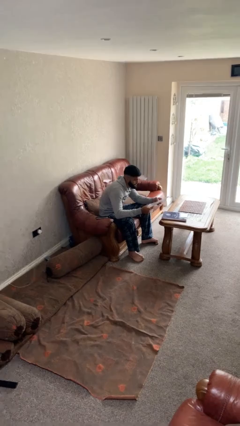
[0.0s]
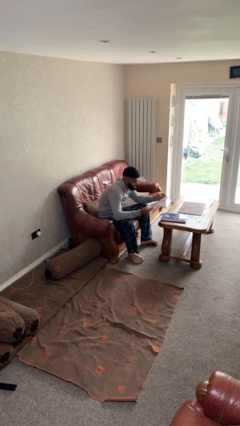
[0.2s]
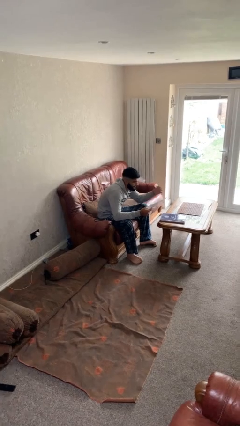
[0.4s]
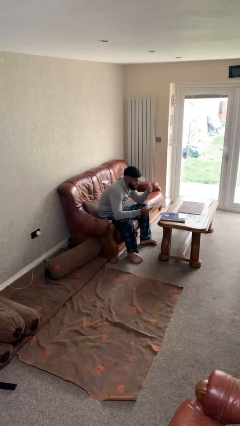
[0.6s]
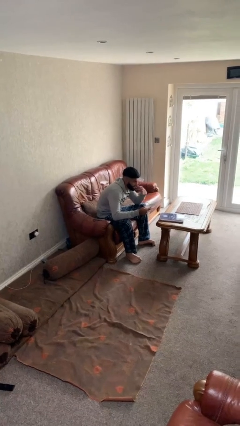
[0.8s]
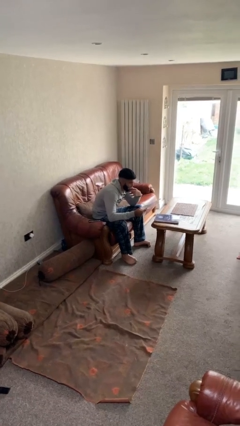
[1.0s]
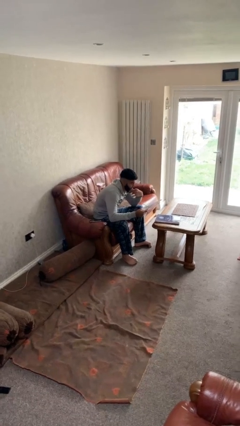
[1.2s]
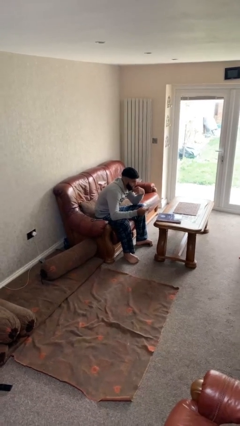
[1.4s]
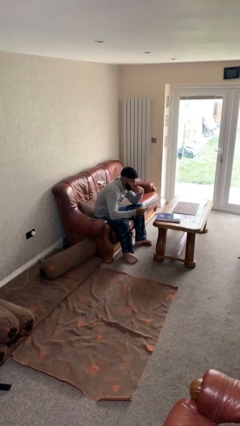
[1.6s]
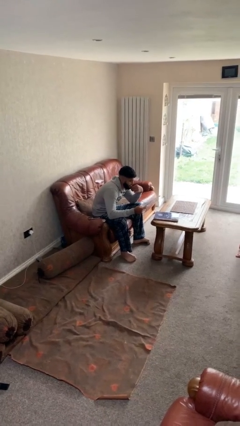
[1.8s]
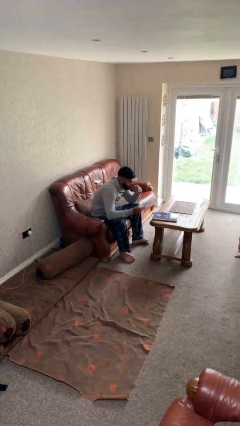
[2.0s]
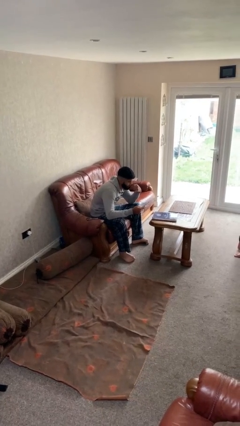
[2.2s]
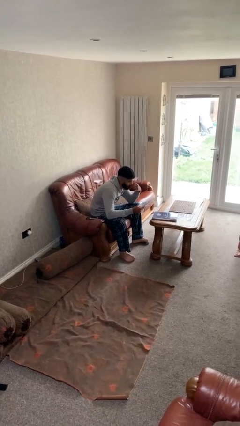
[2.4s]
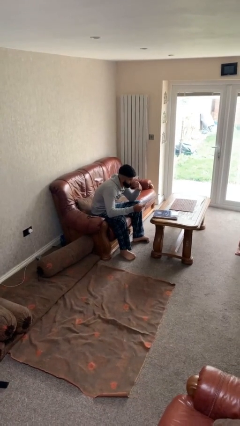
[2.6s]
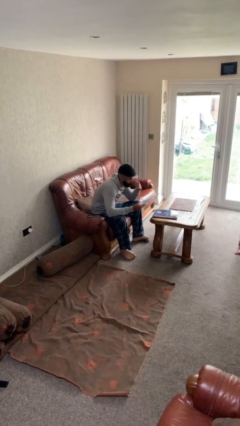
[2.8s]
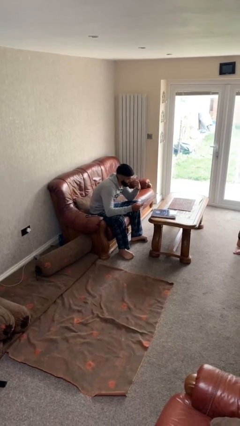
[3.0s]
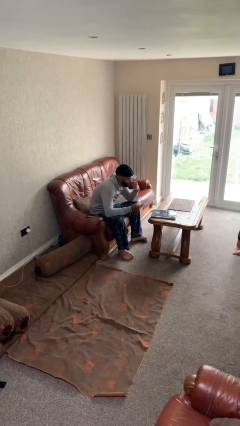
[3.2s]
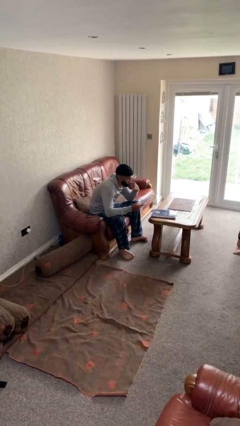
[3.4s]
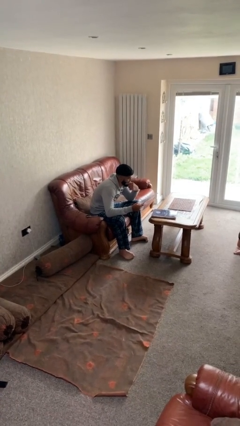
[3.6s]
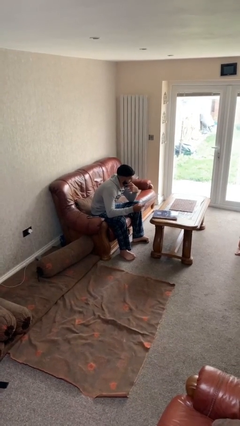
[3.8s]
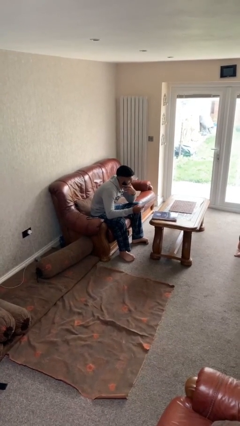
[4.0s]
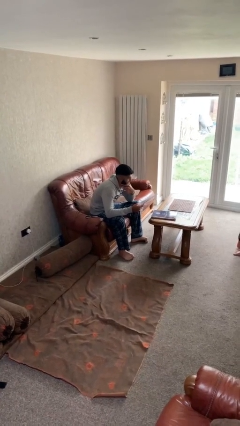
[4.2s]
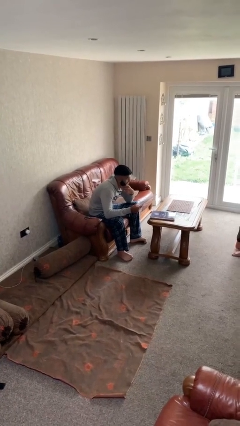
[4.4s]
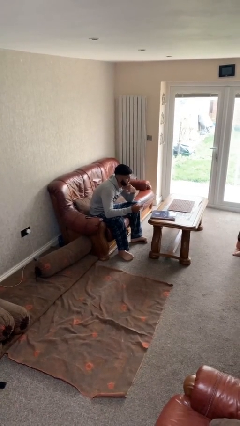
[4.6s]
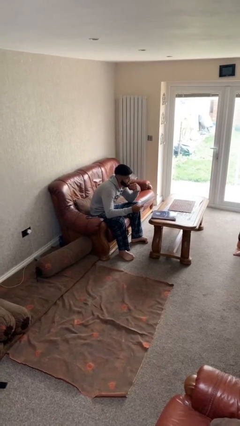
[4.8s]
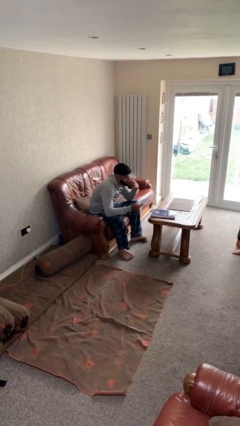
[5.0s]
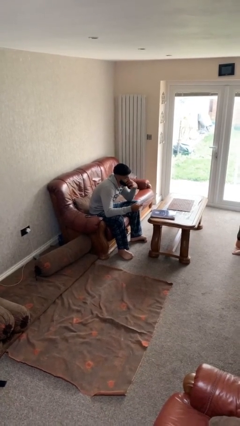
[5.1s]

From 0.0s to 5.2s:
person reads document

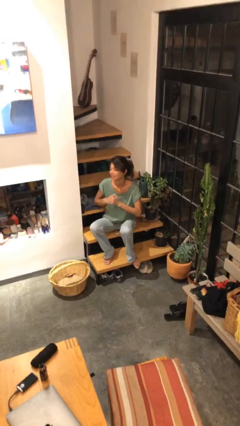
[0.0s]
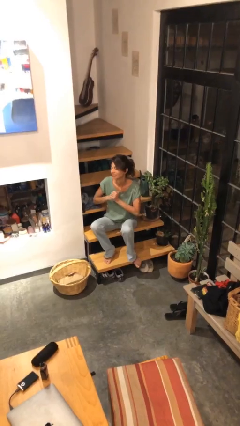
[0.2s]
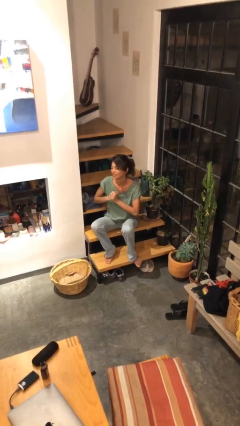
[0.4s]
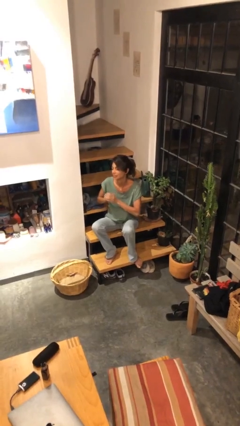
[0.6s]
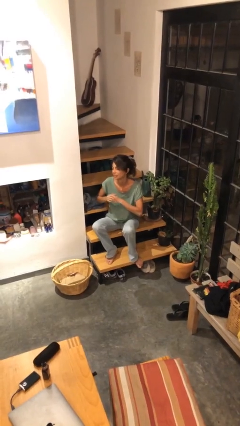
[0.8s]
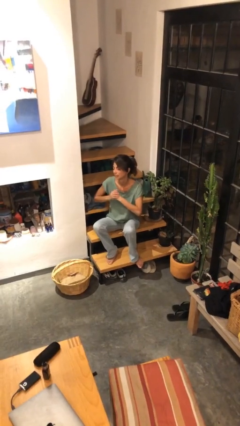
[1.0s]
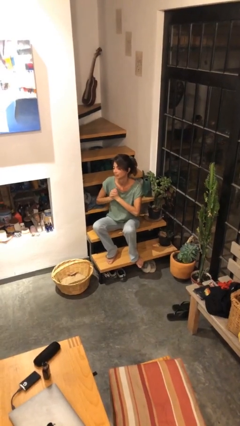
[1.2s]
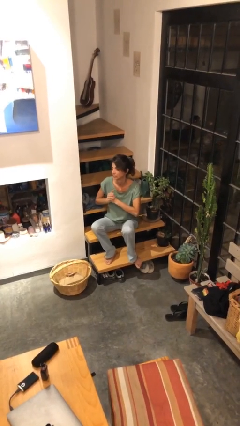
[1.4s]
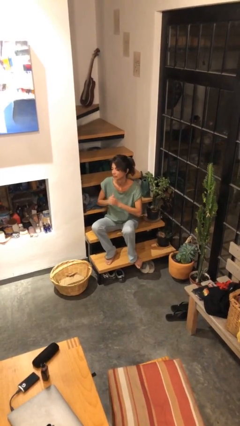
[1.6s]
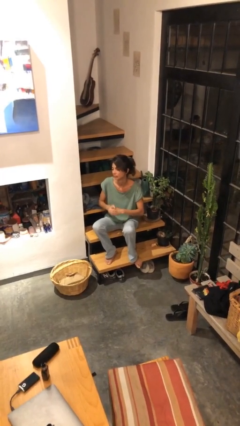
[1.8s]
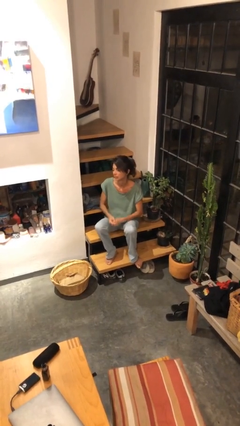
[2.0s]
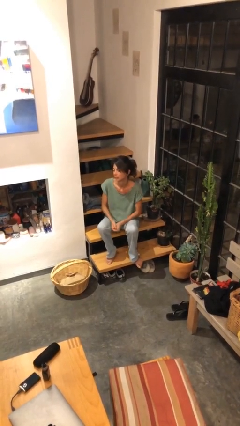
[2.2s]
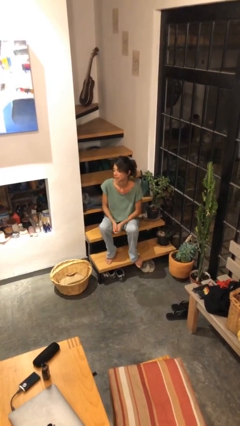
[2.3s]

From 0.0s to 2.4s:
person cracks knuckles

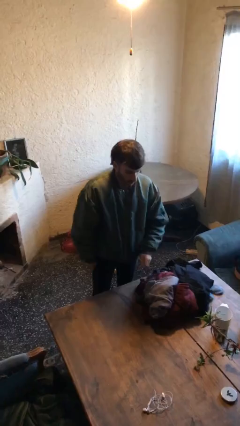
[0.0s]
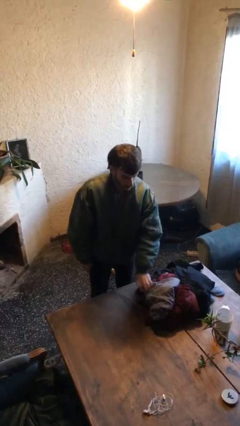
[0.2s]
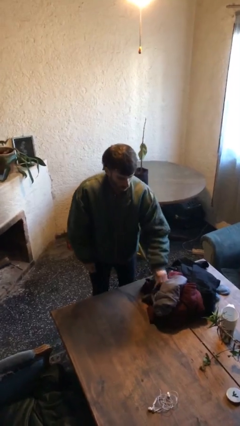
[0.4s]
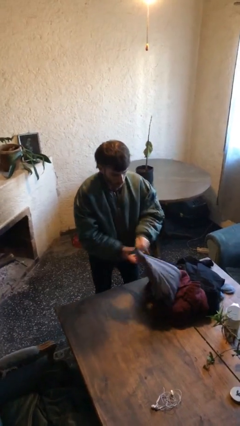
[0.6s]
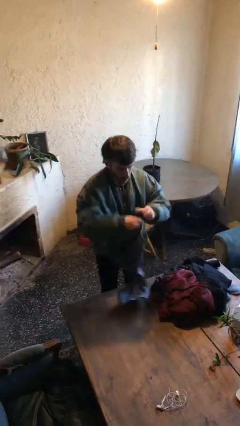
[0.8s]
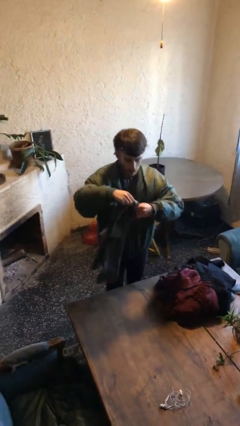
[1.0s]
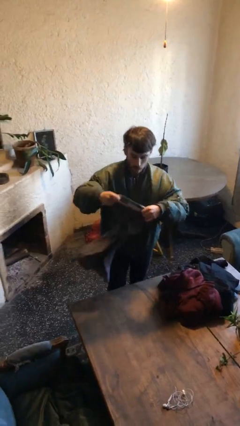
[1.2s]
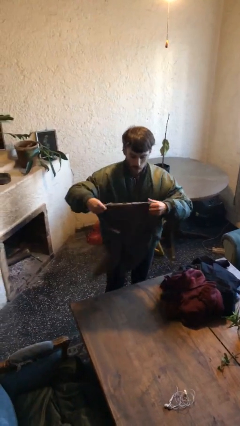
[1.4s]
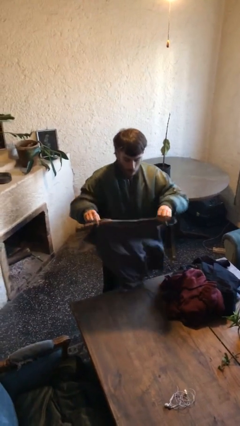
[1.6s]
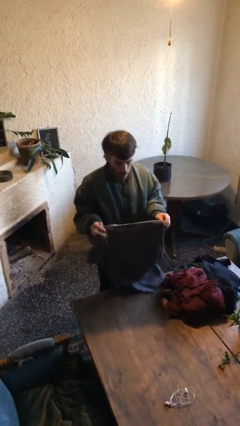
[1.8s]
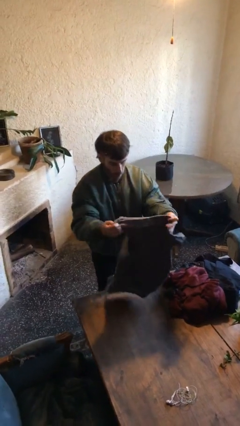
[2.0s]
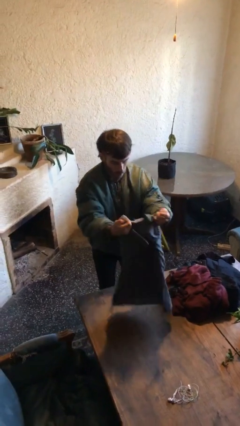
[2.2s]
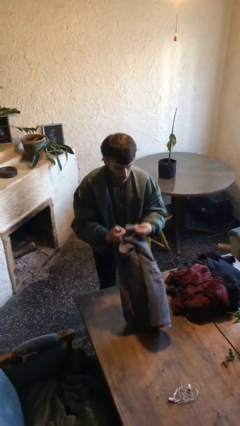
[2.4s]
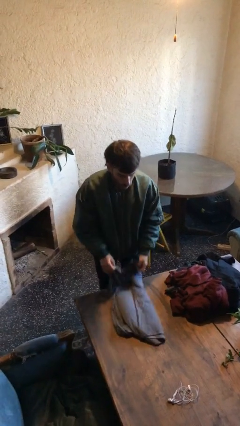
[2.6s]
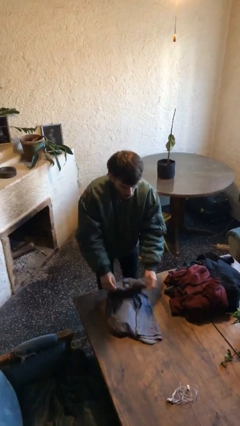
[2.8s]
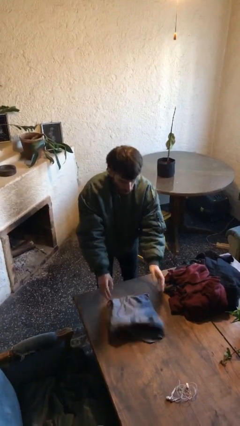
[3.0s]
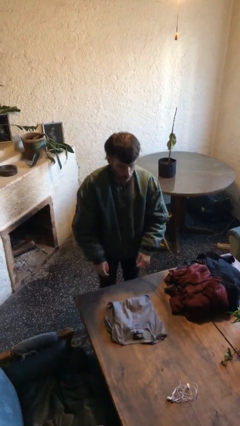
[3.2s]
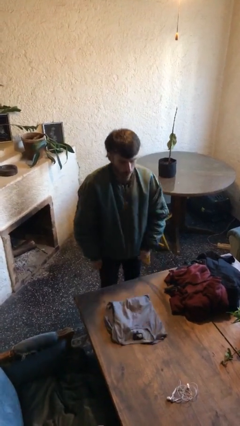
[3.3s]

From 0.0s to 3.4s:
person folds shirt

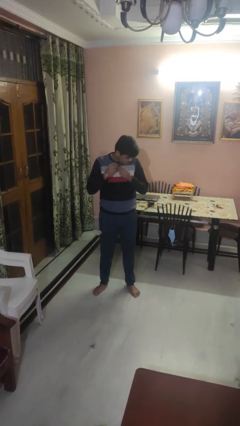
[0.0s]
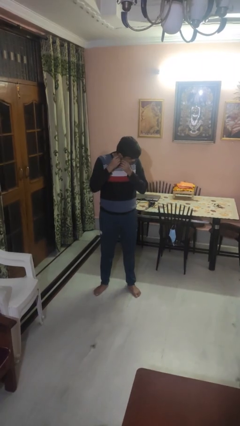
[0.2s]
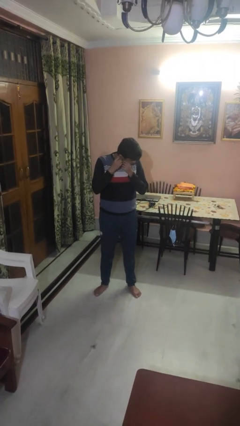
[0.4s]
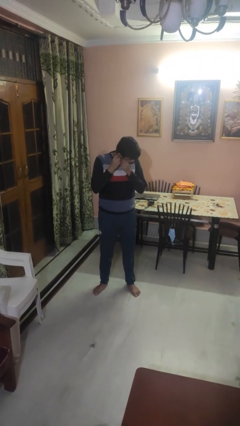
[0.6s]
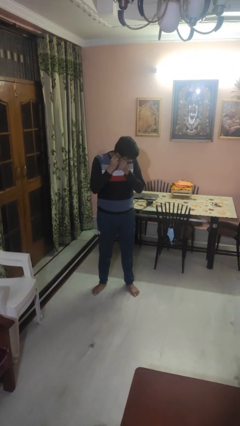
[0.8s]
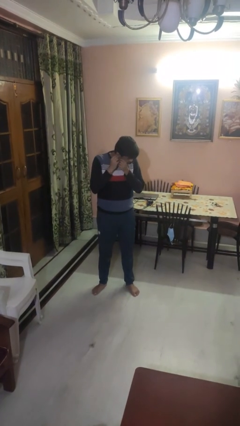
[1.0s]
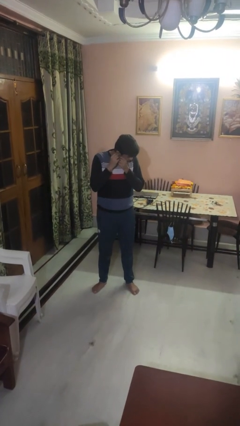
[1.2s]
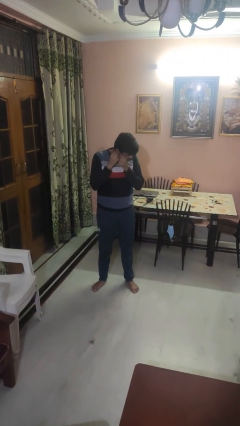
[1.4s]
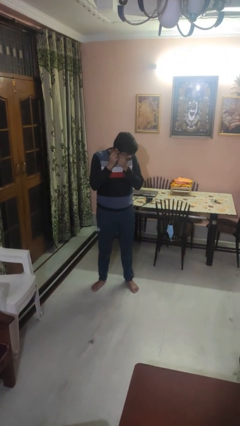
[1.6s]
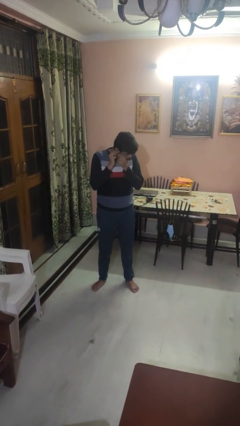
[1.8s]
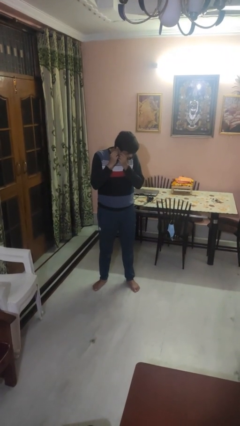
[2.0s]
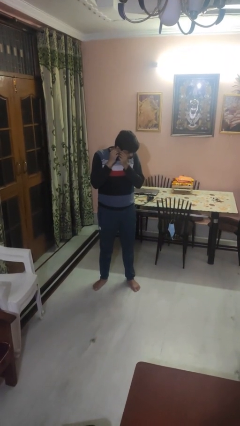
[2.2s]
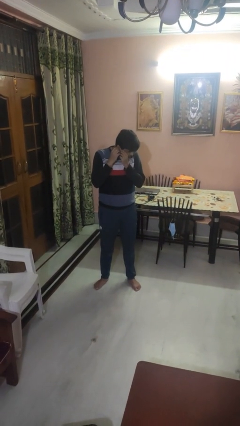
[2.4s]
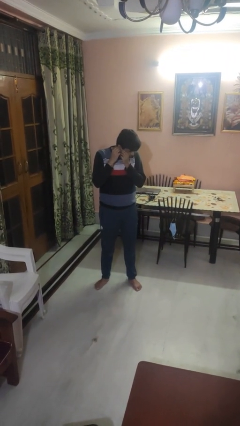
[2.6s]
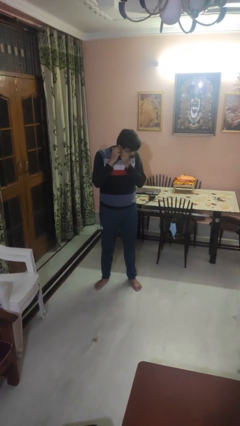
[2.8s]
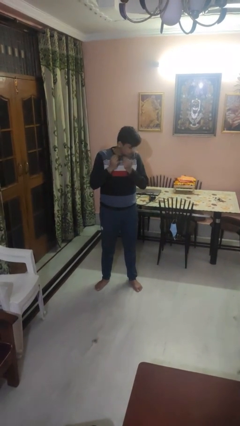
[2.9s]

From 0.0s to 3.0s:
person puts on earrings

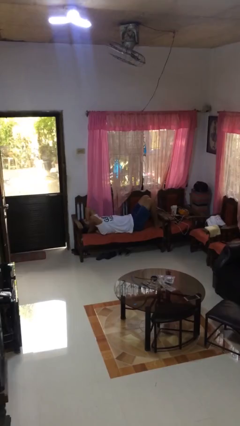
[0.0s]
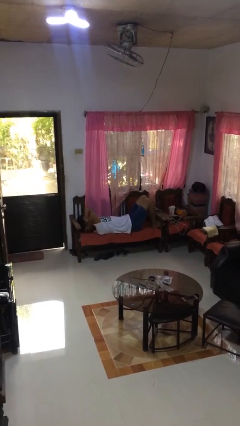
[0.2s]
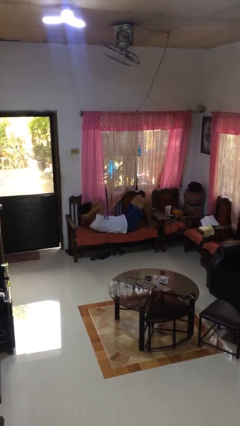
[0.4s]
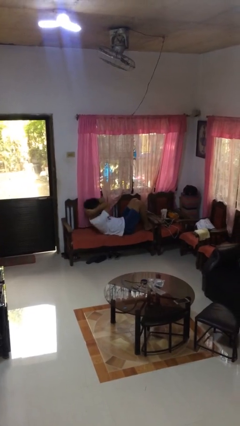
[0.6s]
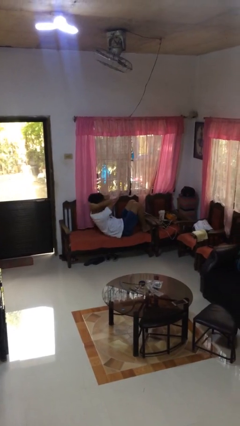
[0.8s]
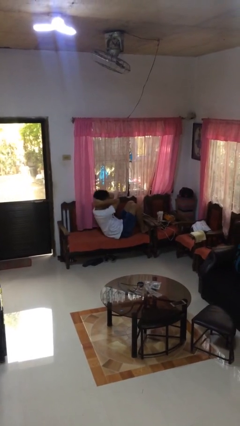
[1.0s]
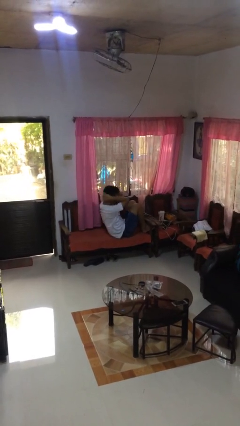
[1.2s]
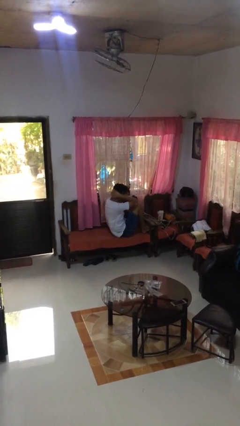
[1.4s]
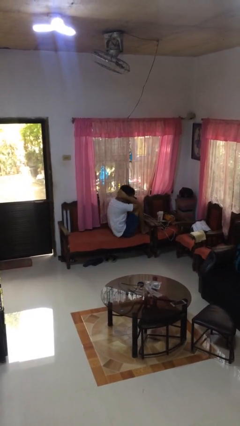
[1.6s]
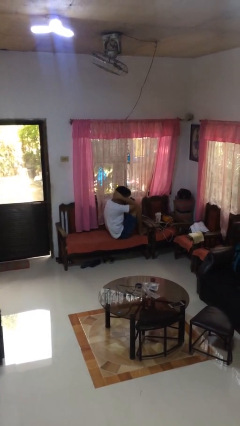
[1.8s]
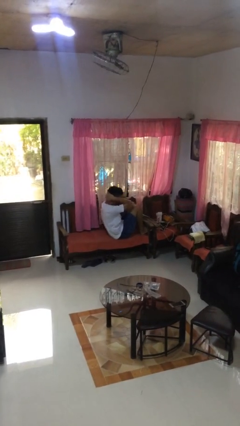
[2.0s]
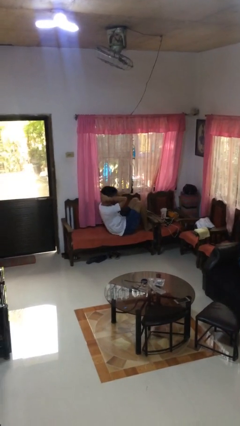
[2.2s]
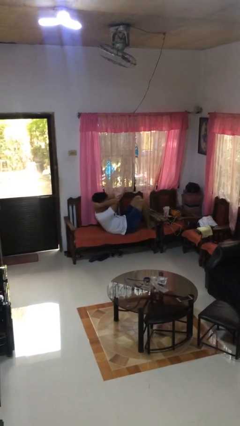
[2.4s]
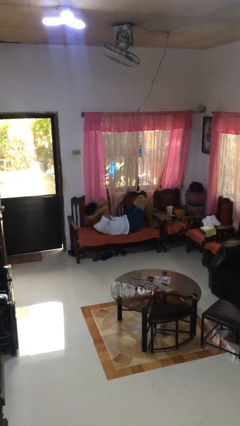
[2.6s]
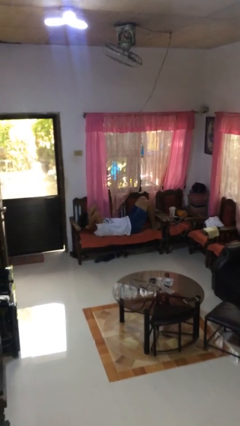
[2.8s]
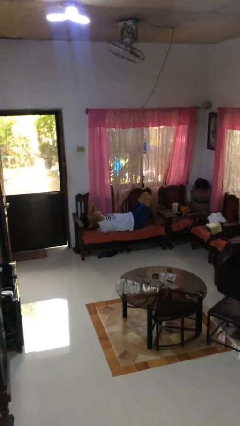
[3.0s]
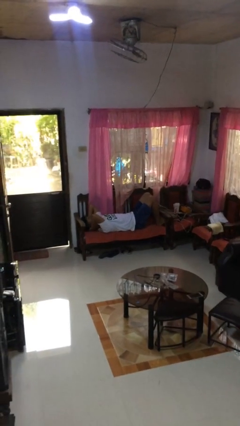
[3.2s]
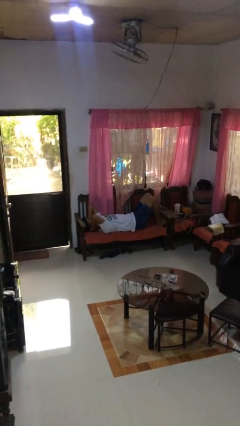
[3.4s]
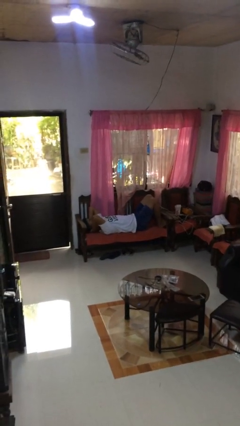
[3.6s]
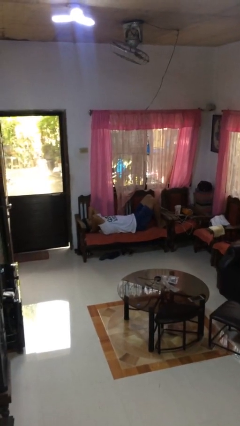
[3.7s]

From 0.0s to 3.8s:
person exercises with situp
